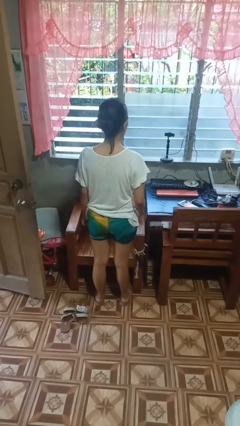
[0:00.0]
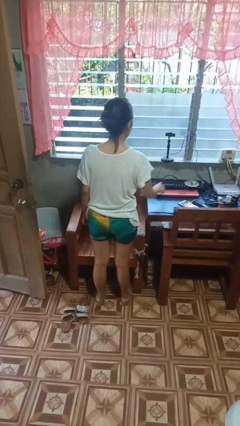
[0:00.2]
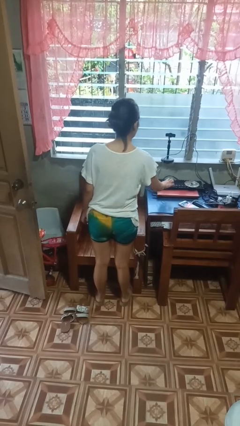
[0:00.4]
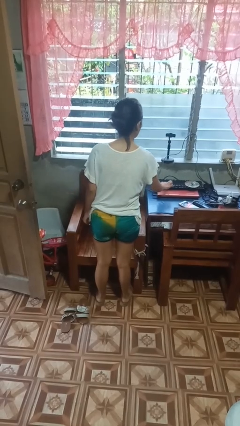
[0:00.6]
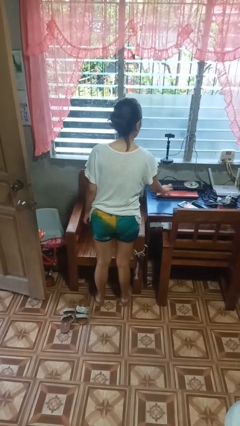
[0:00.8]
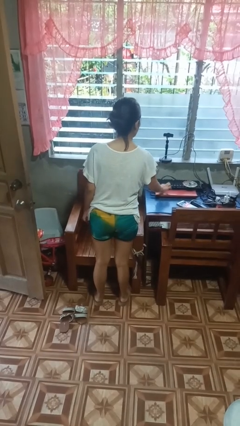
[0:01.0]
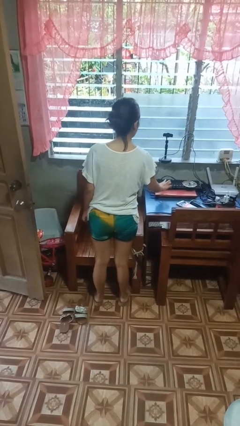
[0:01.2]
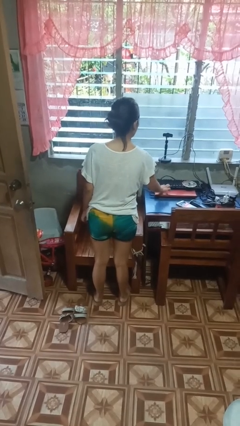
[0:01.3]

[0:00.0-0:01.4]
person taps object with finger

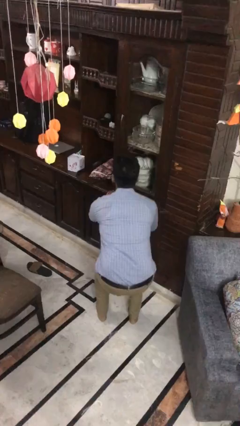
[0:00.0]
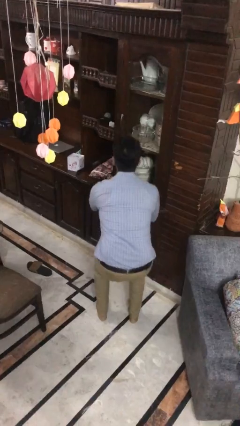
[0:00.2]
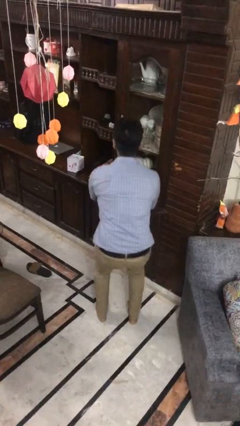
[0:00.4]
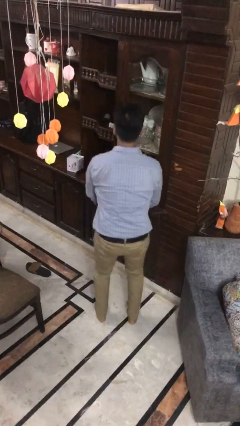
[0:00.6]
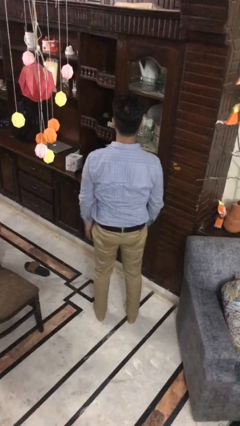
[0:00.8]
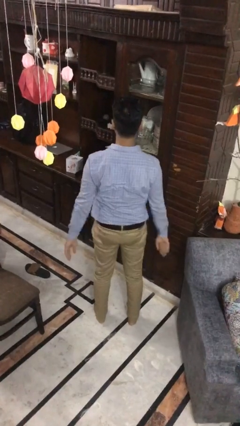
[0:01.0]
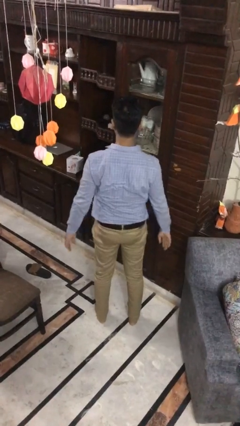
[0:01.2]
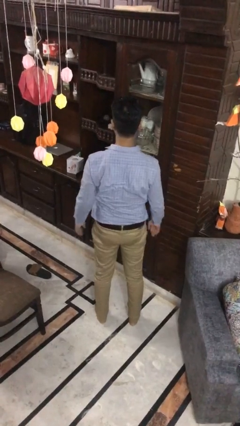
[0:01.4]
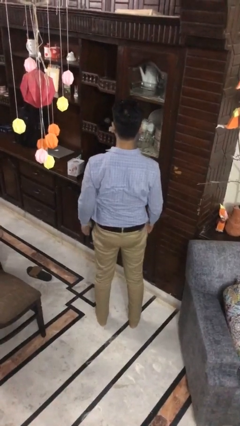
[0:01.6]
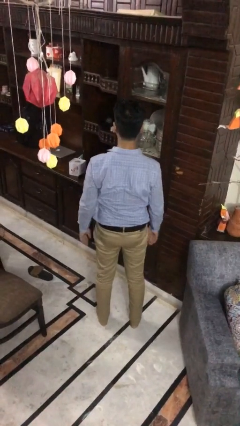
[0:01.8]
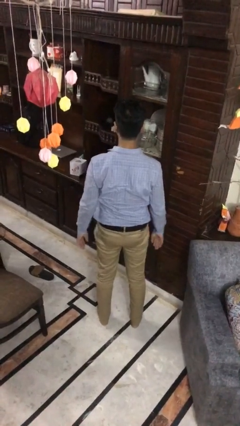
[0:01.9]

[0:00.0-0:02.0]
person stands up

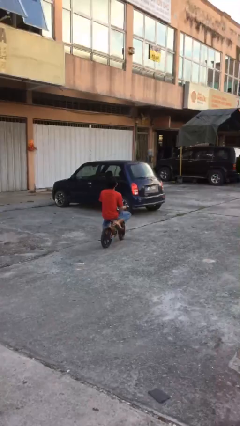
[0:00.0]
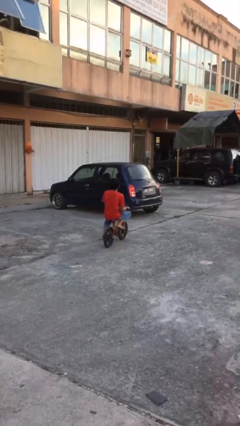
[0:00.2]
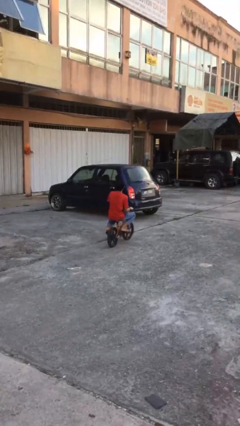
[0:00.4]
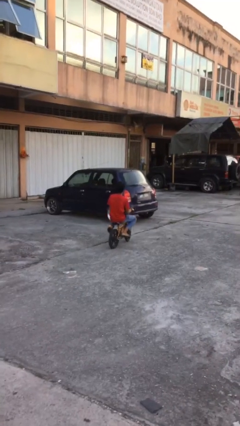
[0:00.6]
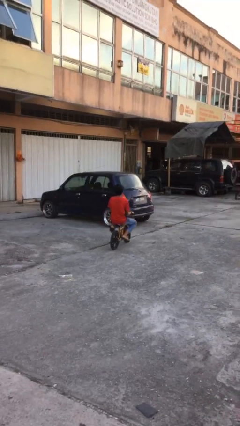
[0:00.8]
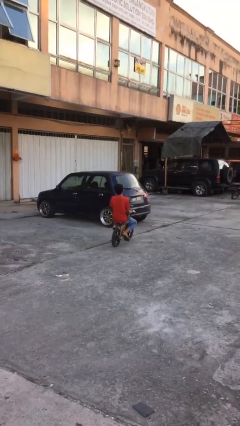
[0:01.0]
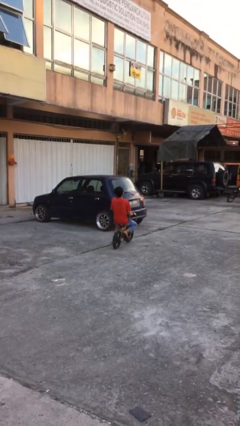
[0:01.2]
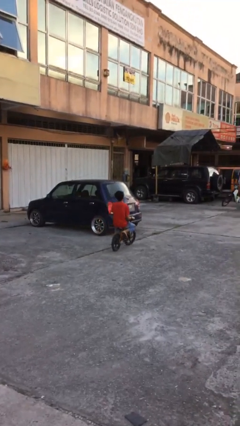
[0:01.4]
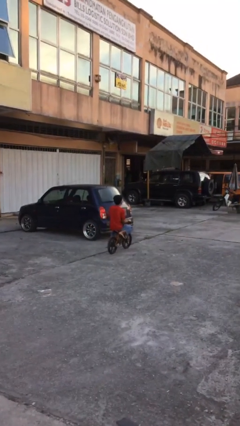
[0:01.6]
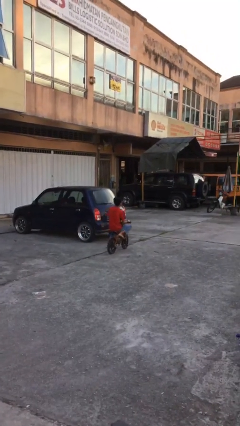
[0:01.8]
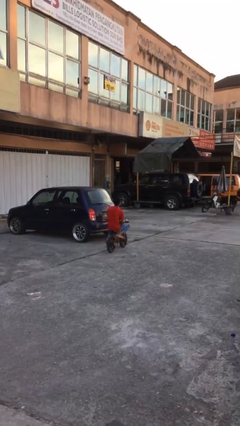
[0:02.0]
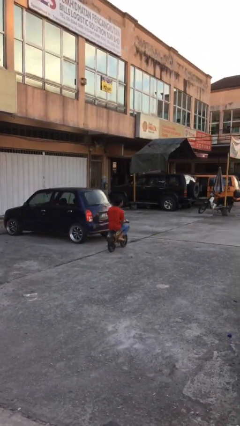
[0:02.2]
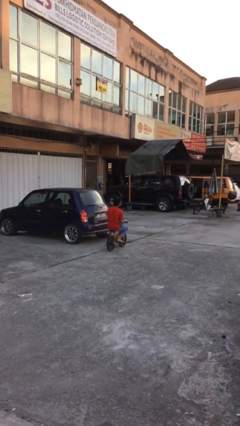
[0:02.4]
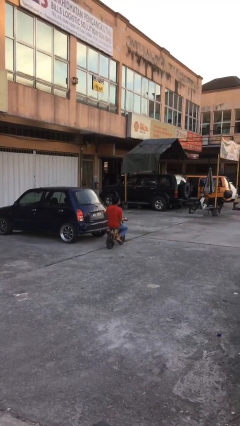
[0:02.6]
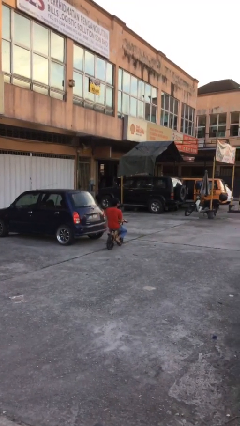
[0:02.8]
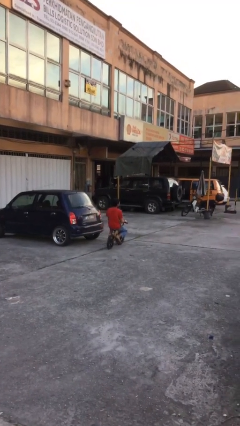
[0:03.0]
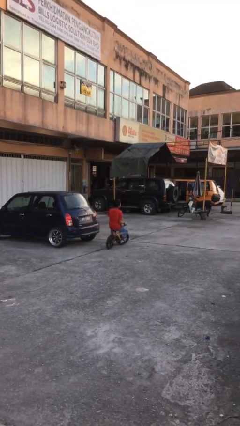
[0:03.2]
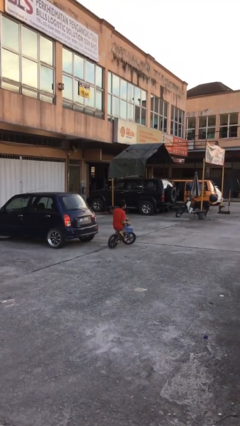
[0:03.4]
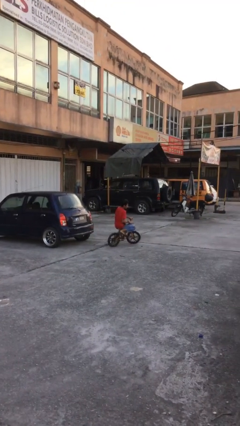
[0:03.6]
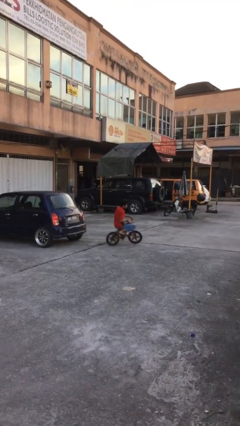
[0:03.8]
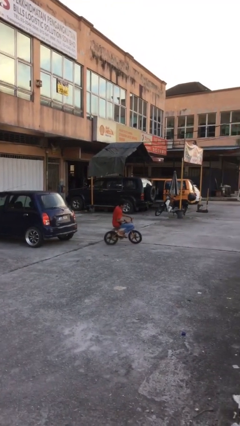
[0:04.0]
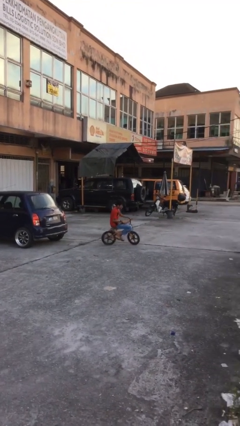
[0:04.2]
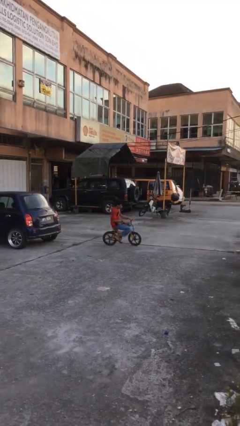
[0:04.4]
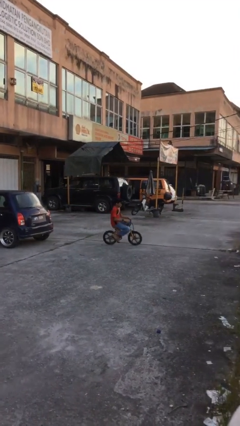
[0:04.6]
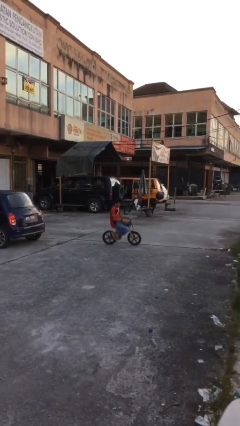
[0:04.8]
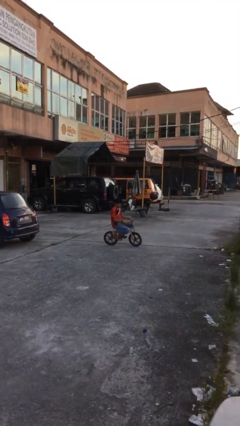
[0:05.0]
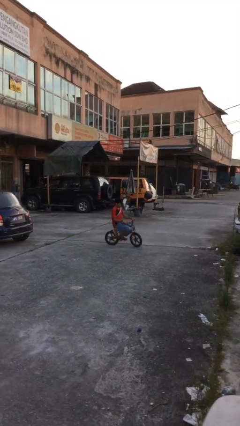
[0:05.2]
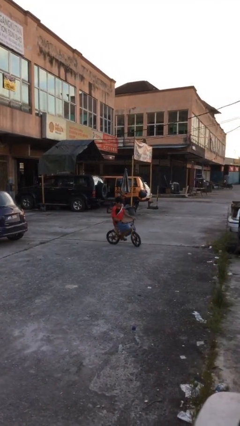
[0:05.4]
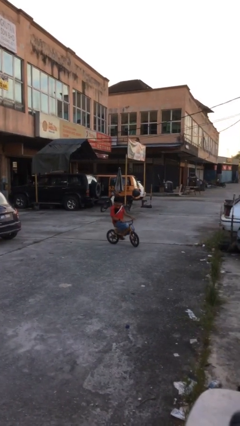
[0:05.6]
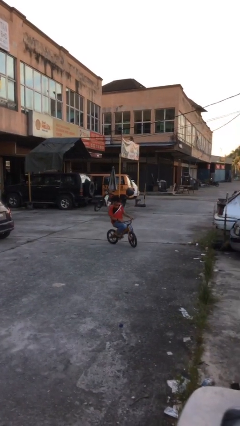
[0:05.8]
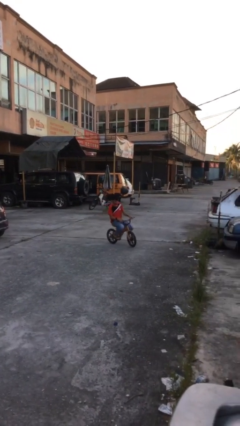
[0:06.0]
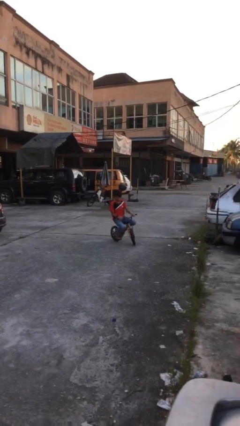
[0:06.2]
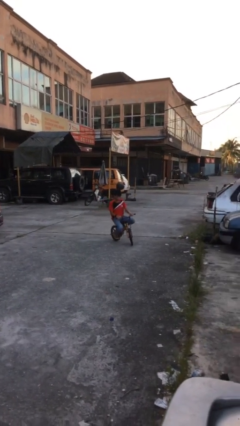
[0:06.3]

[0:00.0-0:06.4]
person rides bicycle

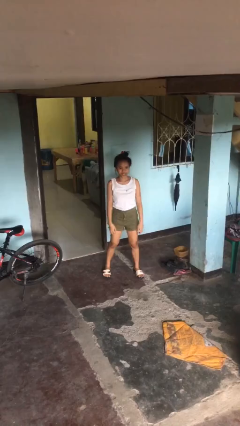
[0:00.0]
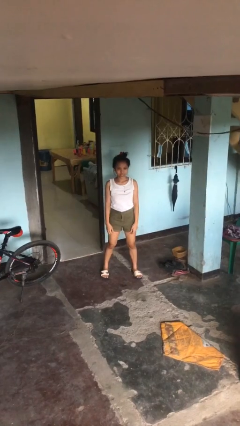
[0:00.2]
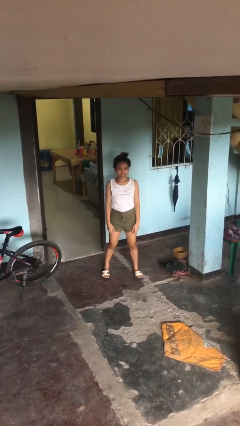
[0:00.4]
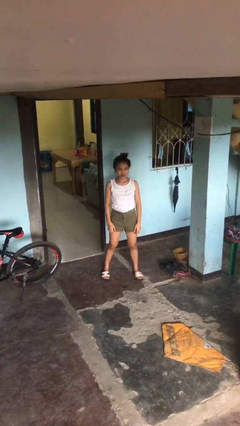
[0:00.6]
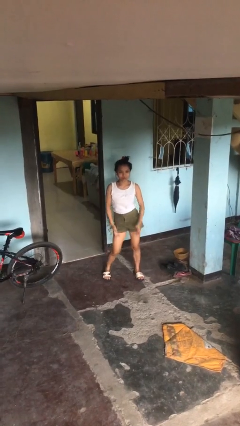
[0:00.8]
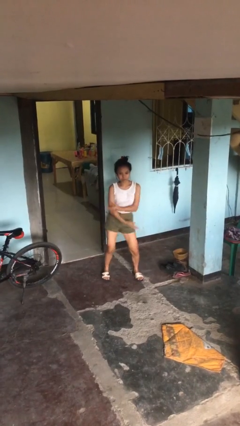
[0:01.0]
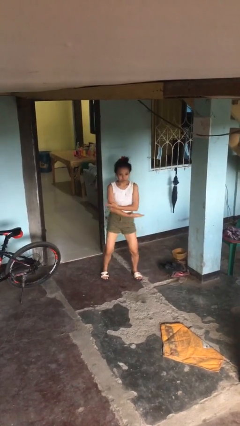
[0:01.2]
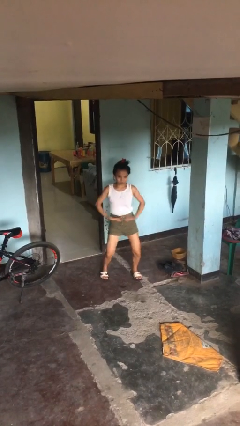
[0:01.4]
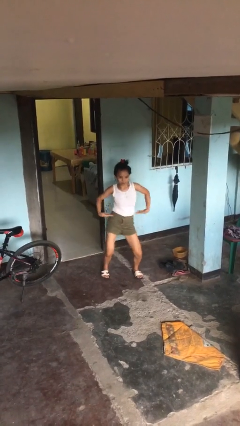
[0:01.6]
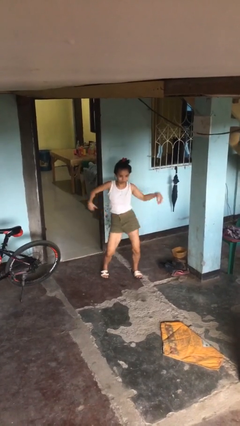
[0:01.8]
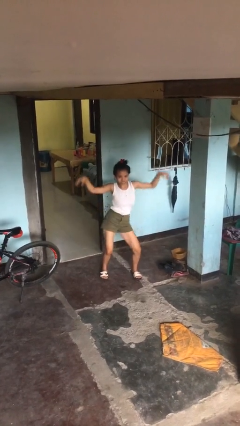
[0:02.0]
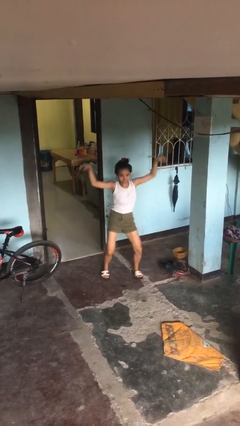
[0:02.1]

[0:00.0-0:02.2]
person dances in place

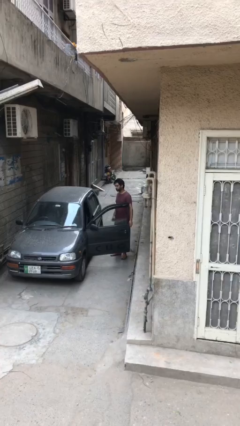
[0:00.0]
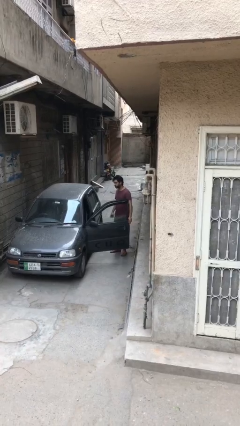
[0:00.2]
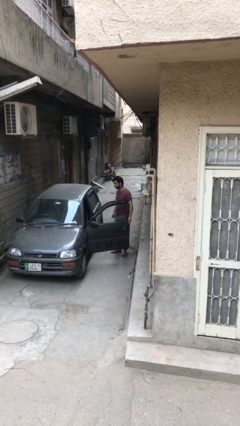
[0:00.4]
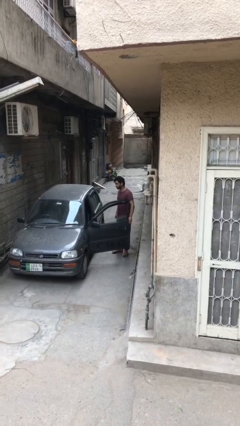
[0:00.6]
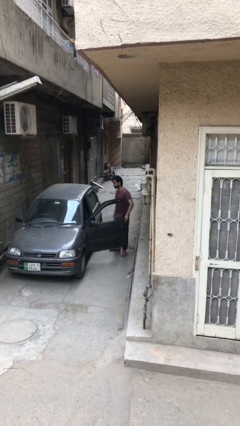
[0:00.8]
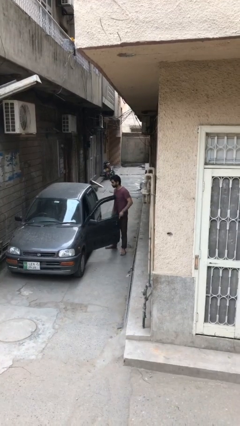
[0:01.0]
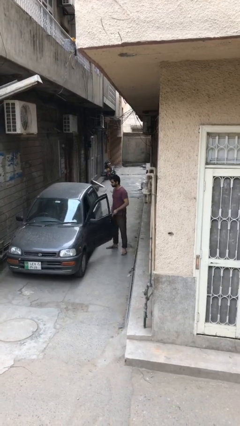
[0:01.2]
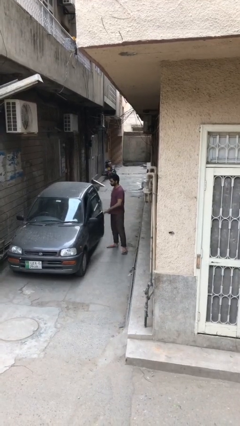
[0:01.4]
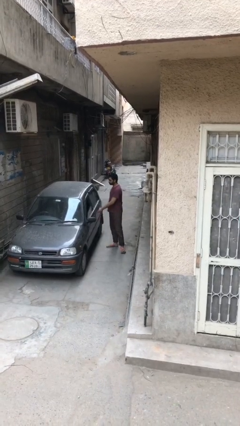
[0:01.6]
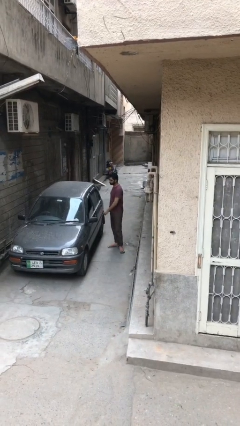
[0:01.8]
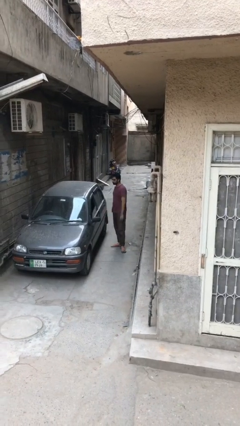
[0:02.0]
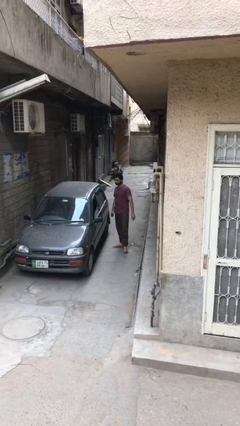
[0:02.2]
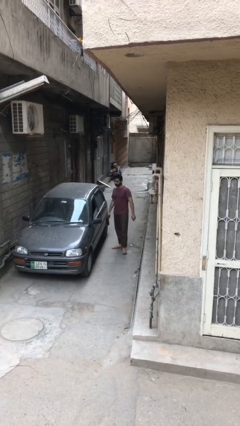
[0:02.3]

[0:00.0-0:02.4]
person closes car door

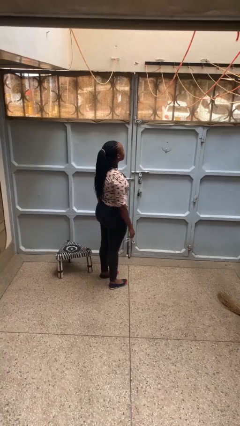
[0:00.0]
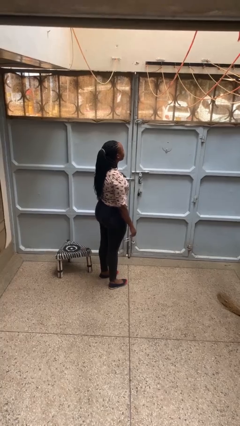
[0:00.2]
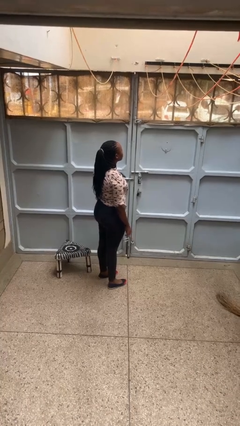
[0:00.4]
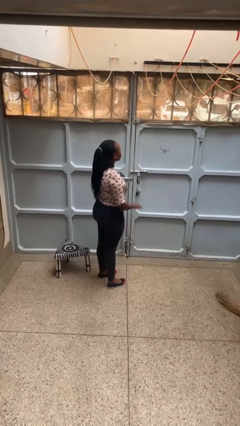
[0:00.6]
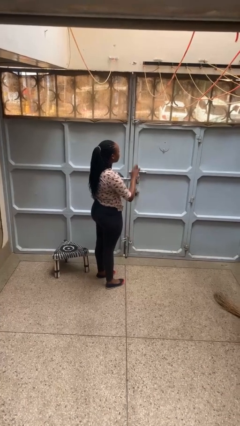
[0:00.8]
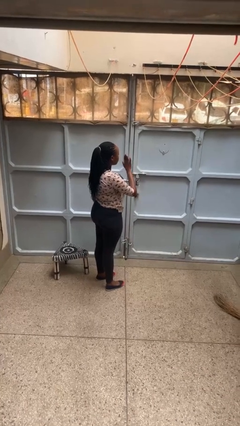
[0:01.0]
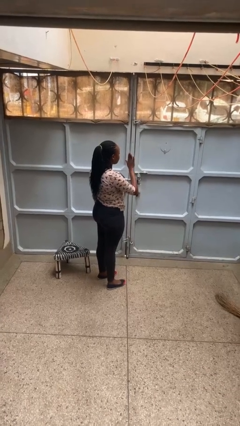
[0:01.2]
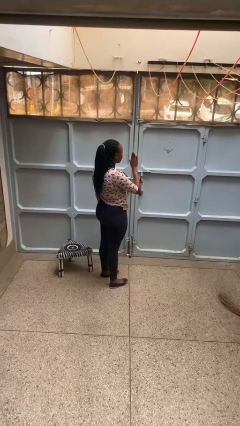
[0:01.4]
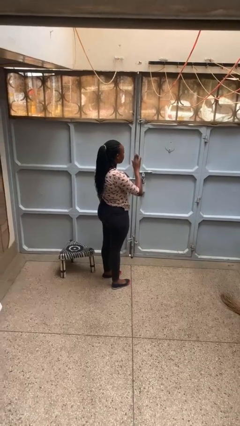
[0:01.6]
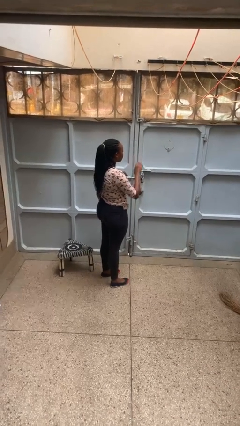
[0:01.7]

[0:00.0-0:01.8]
person gestures stop

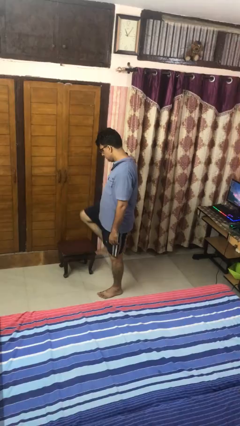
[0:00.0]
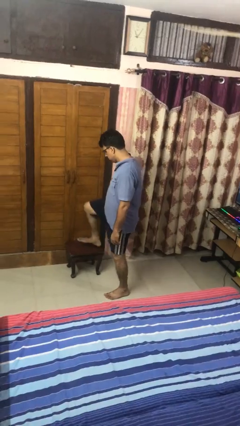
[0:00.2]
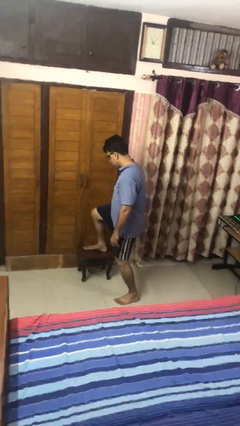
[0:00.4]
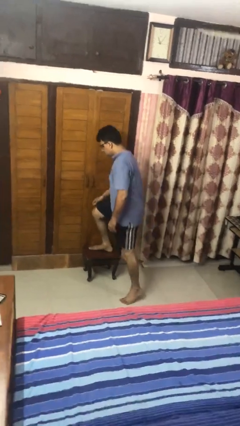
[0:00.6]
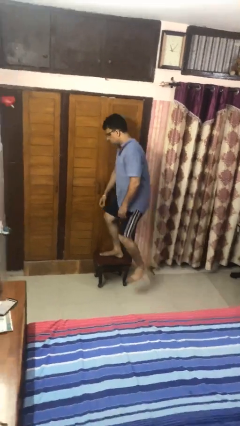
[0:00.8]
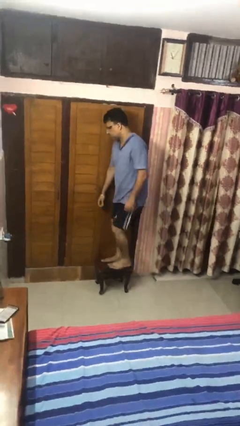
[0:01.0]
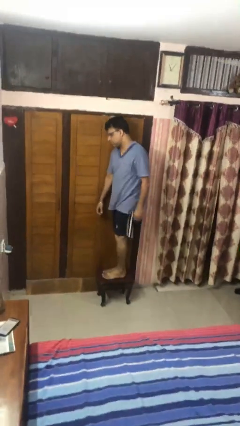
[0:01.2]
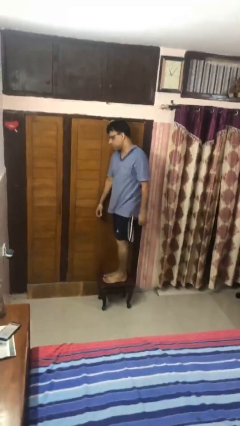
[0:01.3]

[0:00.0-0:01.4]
person climbs on table
